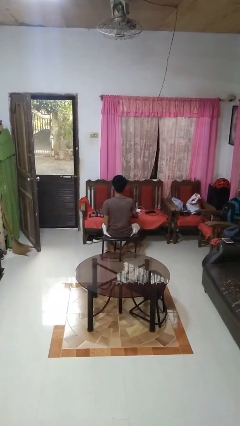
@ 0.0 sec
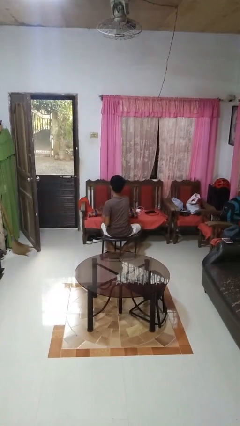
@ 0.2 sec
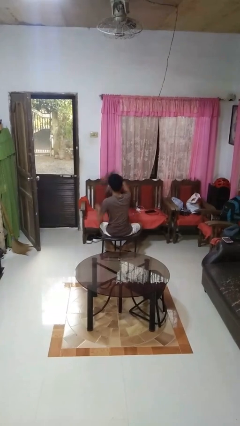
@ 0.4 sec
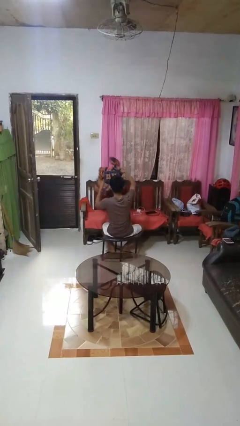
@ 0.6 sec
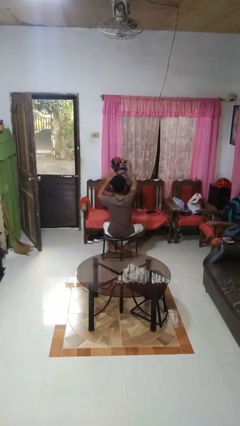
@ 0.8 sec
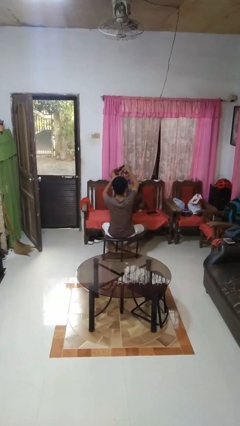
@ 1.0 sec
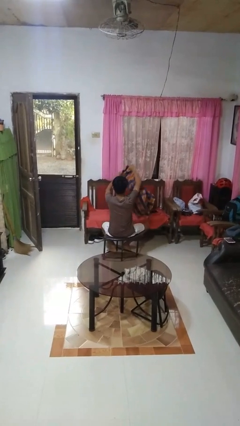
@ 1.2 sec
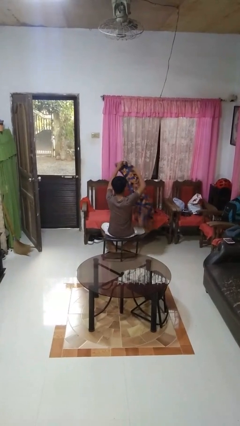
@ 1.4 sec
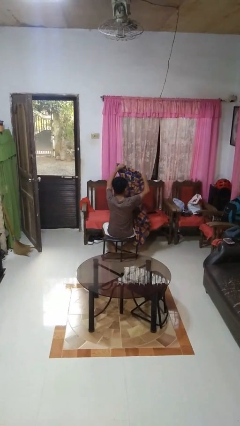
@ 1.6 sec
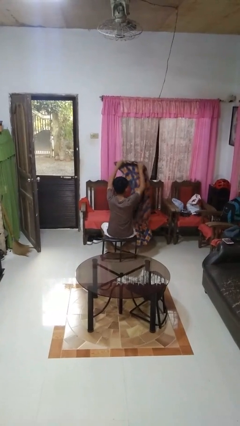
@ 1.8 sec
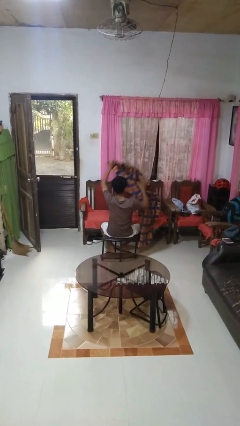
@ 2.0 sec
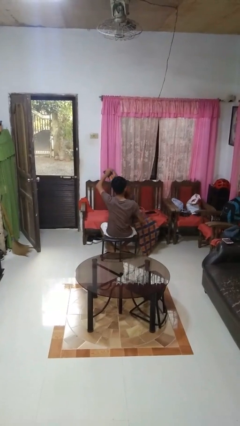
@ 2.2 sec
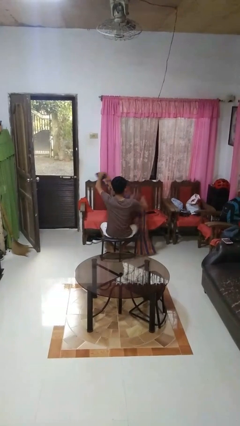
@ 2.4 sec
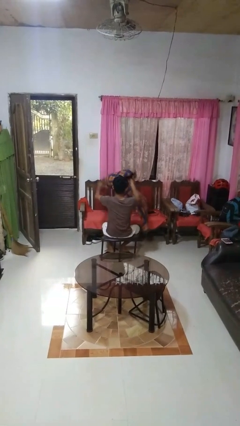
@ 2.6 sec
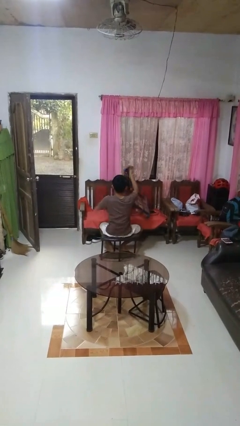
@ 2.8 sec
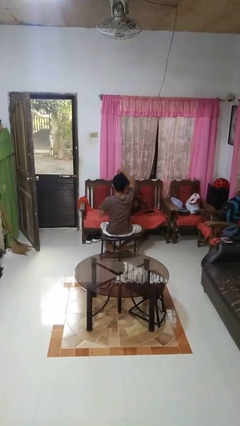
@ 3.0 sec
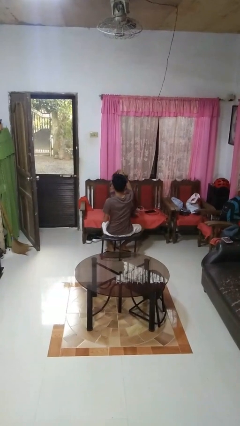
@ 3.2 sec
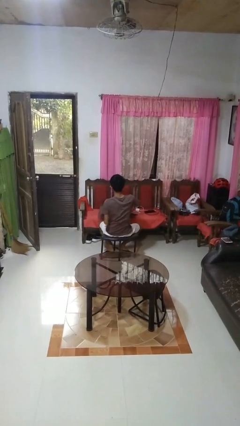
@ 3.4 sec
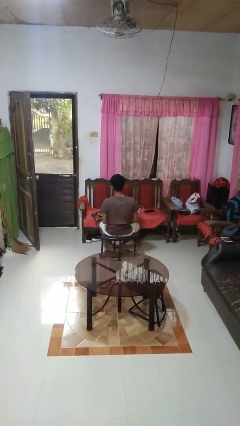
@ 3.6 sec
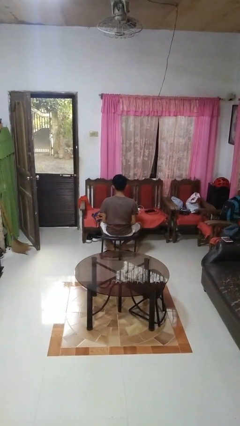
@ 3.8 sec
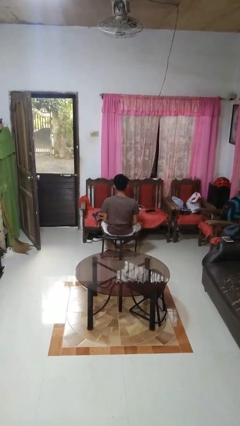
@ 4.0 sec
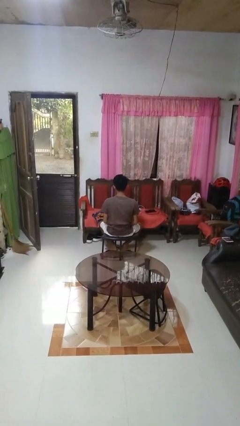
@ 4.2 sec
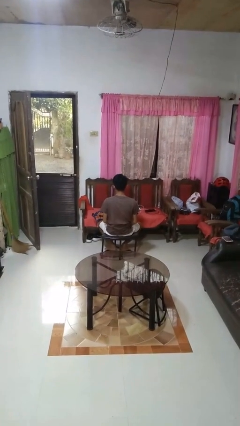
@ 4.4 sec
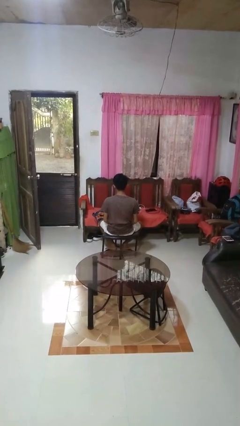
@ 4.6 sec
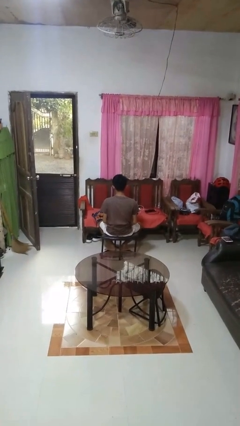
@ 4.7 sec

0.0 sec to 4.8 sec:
person unfolds blanket

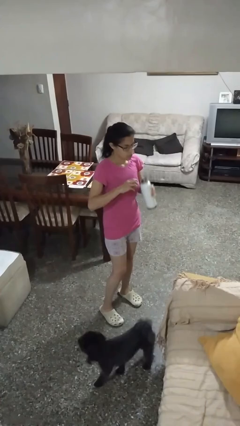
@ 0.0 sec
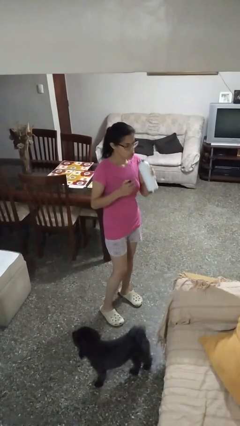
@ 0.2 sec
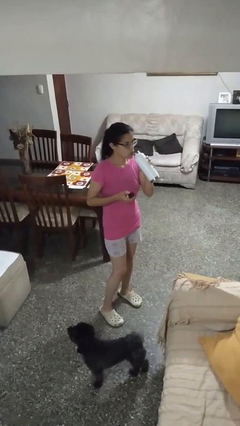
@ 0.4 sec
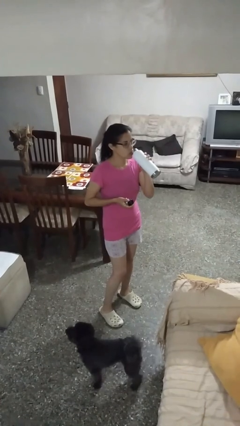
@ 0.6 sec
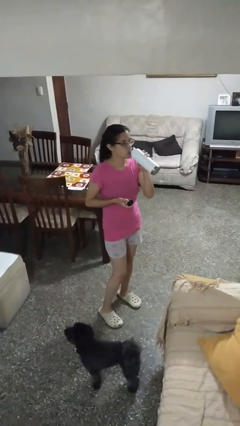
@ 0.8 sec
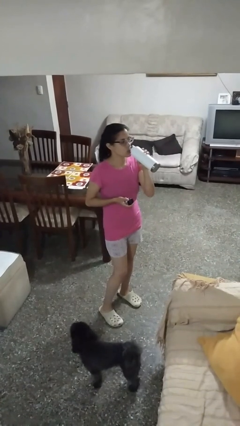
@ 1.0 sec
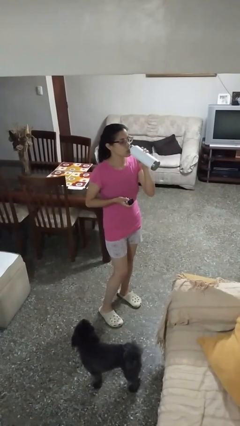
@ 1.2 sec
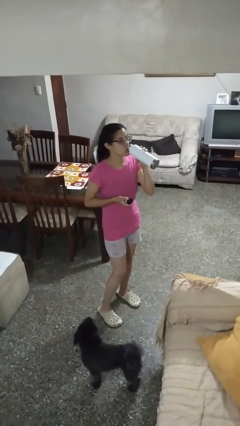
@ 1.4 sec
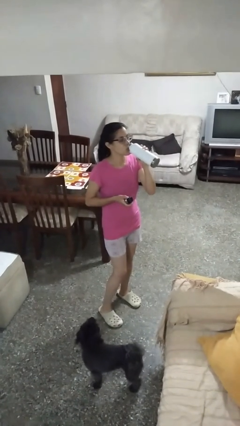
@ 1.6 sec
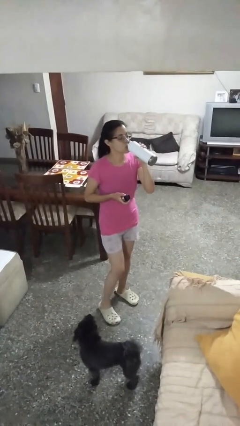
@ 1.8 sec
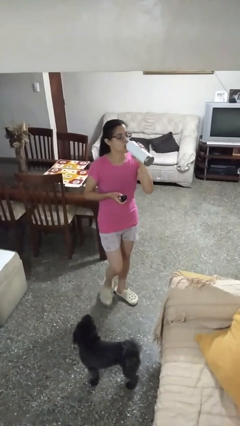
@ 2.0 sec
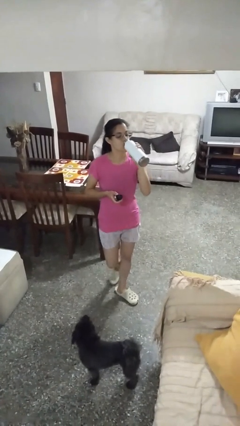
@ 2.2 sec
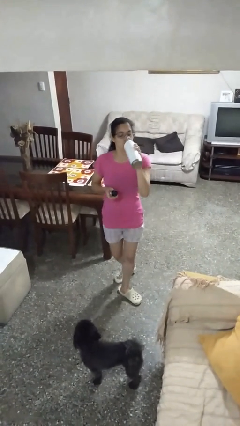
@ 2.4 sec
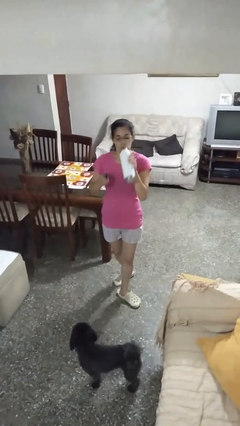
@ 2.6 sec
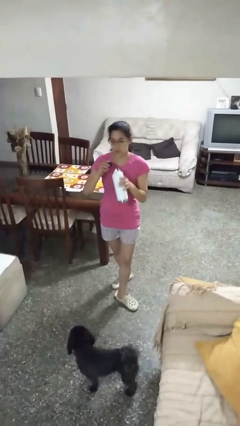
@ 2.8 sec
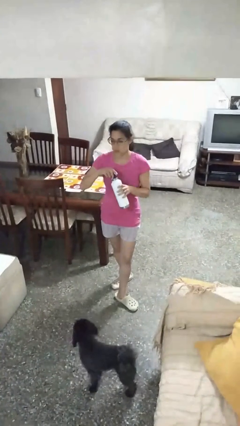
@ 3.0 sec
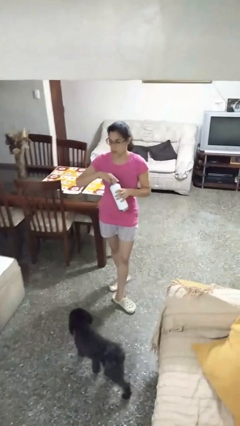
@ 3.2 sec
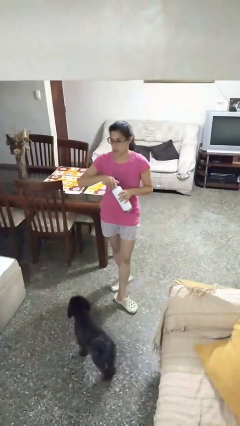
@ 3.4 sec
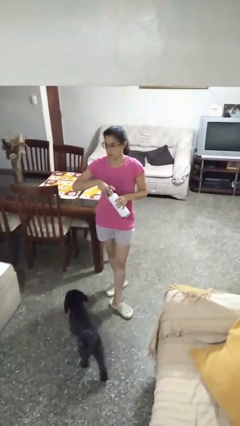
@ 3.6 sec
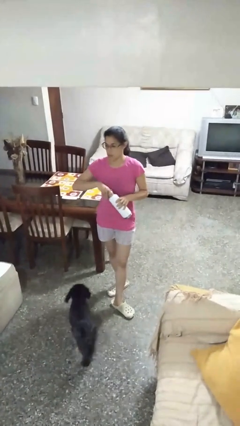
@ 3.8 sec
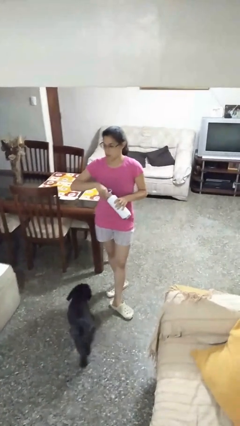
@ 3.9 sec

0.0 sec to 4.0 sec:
person drinks from bottle

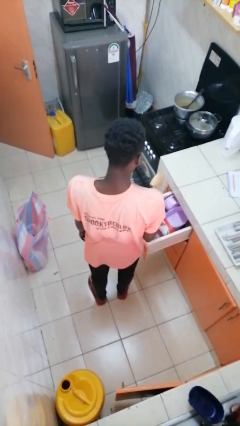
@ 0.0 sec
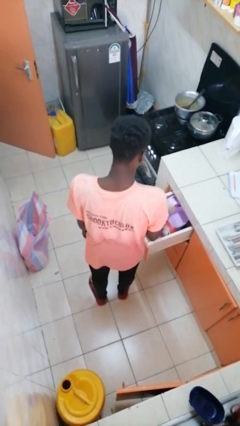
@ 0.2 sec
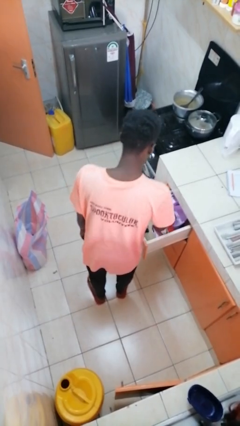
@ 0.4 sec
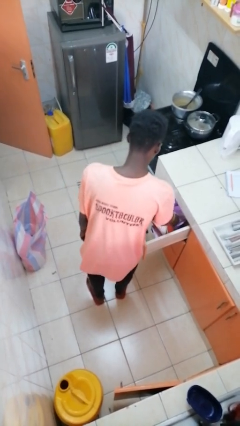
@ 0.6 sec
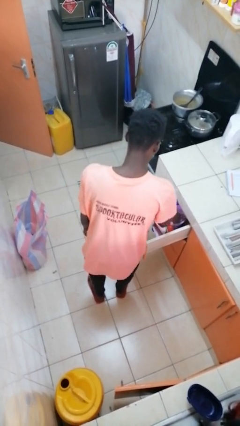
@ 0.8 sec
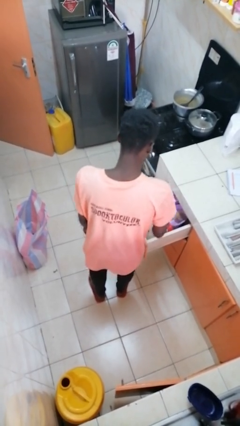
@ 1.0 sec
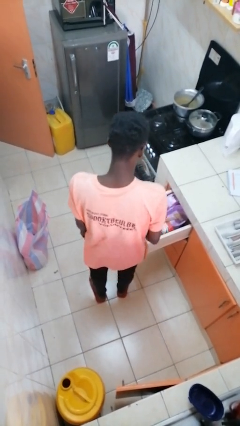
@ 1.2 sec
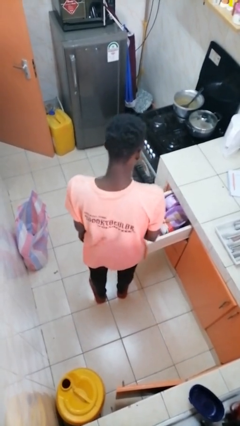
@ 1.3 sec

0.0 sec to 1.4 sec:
person puts object into kitchen drawer

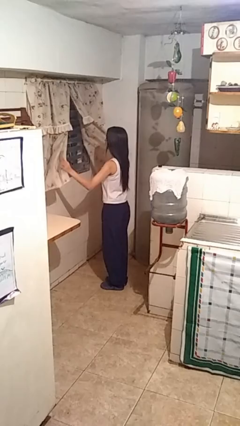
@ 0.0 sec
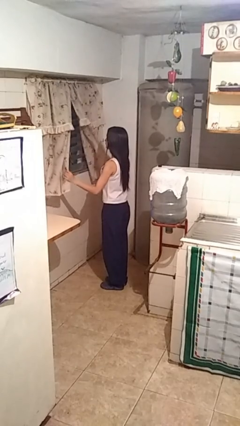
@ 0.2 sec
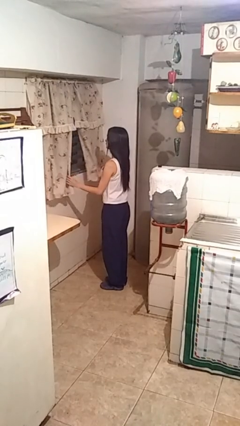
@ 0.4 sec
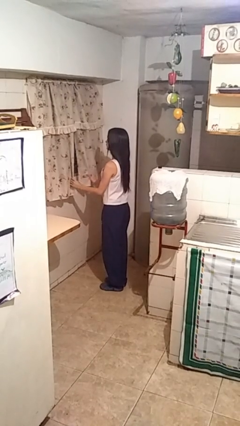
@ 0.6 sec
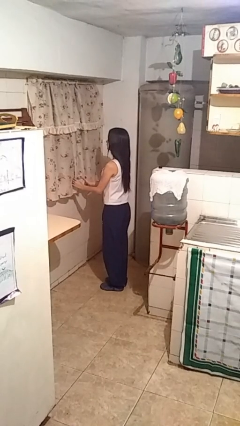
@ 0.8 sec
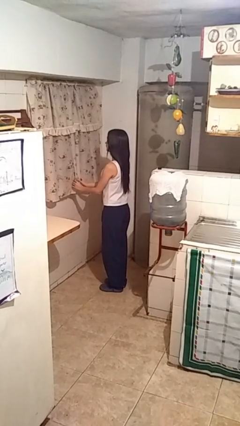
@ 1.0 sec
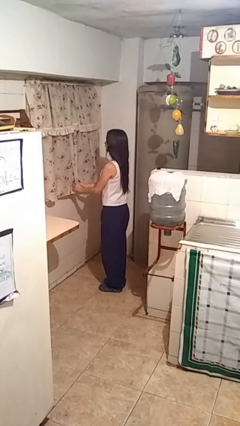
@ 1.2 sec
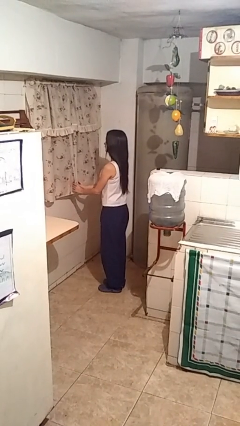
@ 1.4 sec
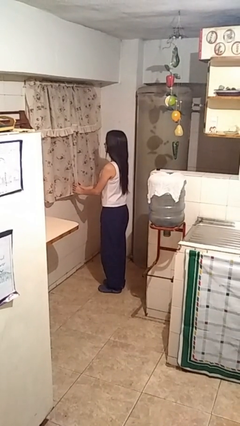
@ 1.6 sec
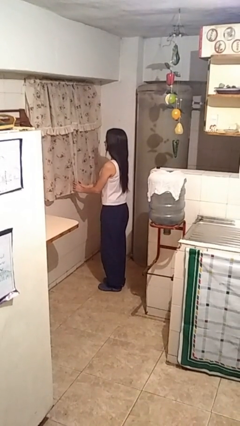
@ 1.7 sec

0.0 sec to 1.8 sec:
person closes curtains

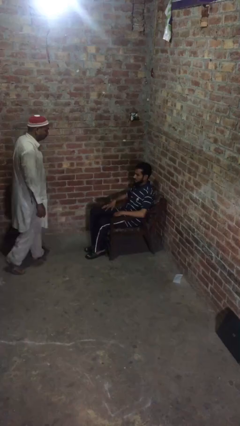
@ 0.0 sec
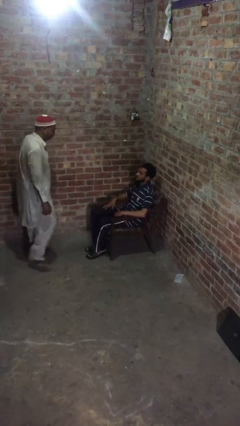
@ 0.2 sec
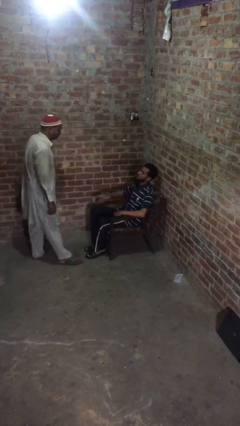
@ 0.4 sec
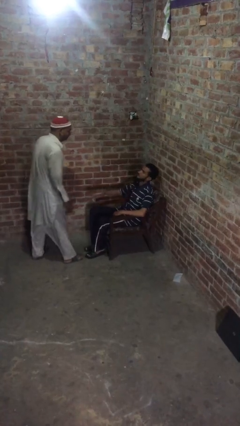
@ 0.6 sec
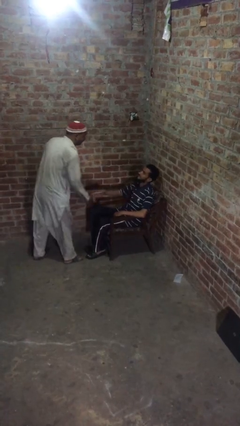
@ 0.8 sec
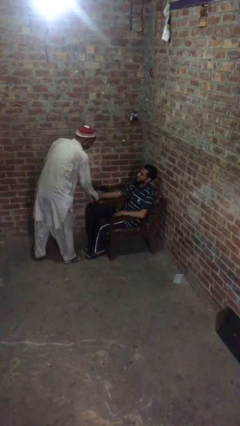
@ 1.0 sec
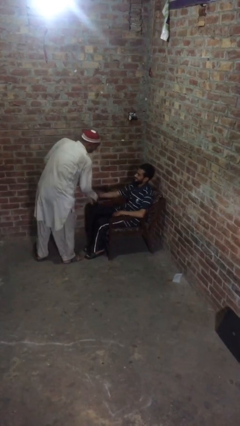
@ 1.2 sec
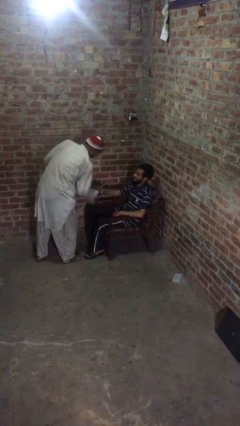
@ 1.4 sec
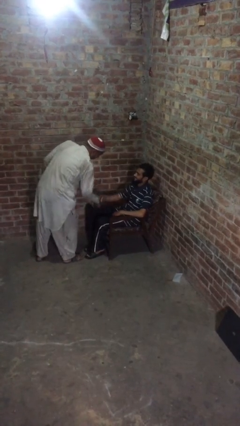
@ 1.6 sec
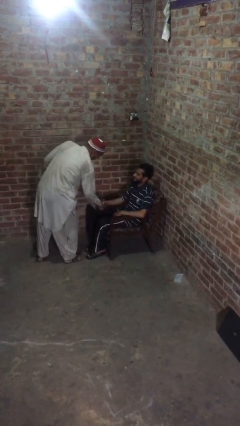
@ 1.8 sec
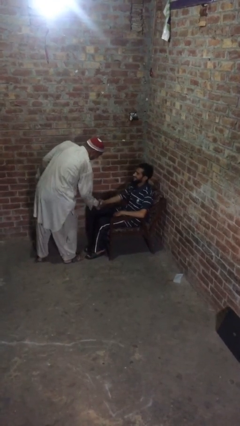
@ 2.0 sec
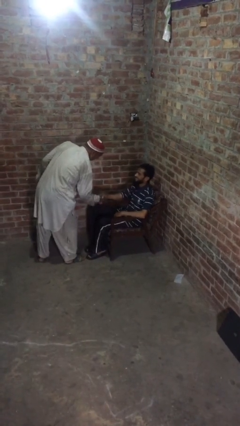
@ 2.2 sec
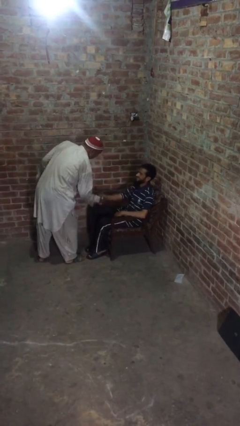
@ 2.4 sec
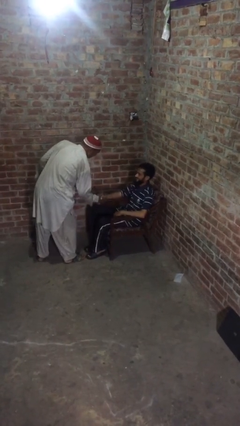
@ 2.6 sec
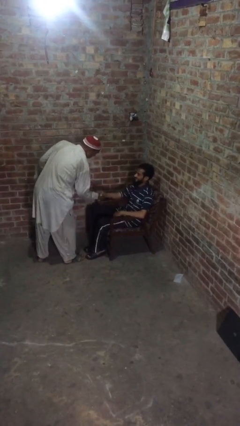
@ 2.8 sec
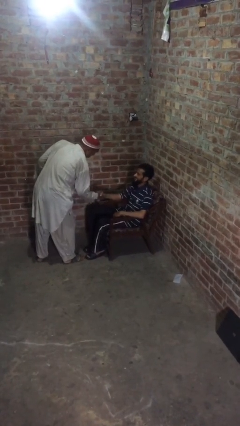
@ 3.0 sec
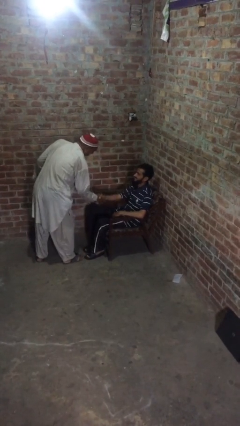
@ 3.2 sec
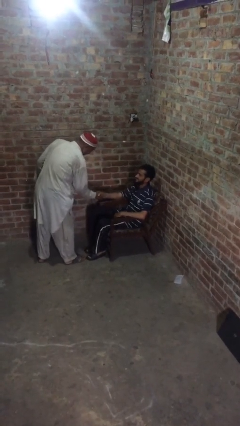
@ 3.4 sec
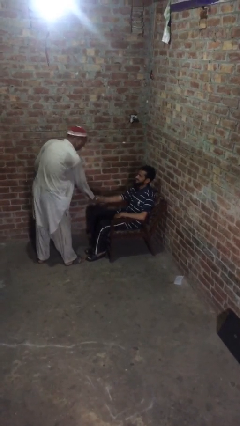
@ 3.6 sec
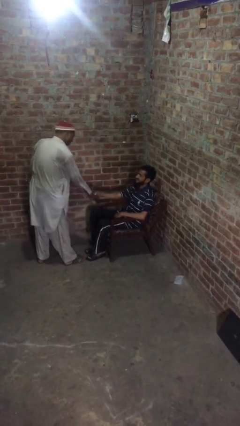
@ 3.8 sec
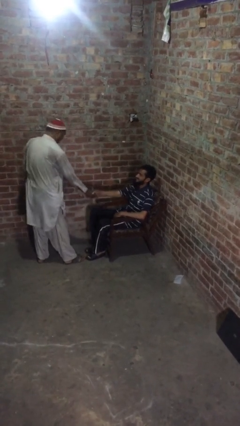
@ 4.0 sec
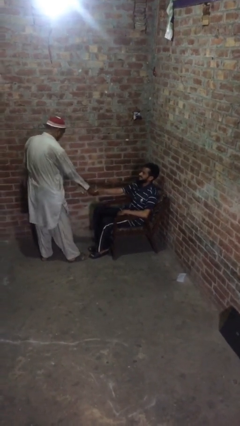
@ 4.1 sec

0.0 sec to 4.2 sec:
person shakes hand

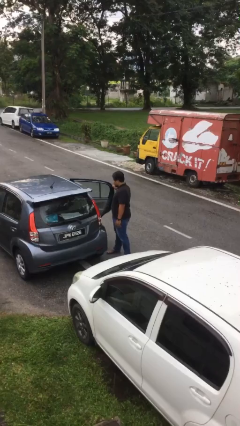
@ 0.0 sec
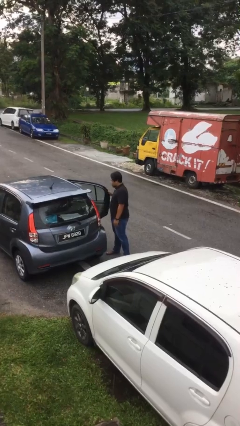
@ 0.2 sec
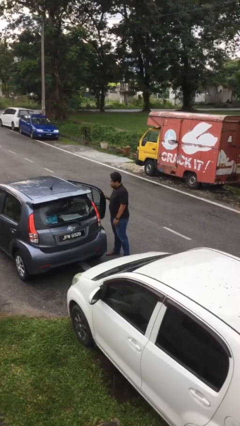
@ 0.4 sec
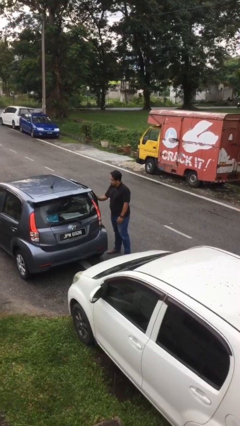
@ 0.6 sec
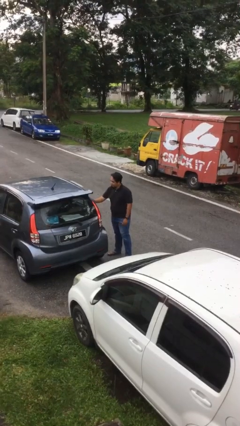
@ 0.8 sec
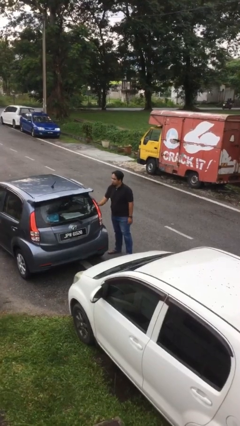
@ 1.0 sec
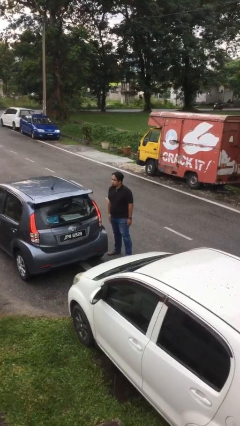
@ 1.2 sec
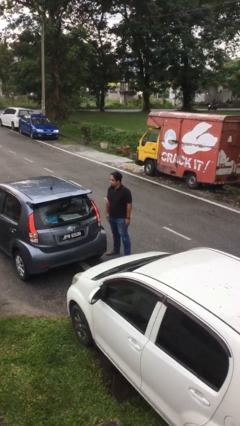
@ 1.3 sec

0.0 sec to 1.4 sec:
person closes car door
